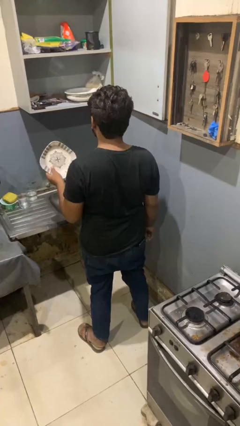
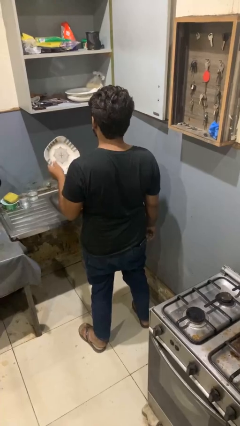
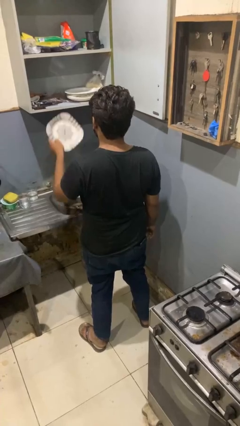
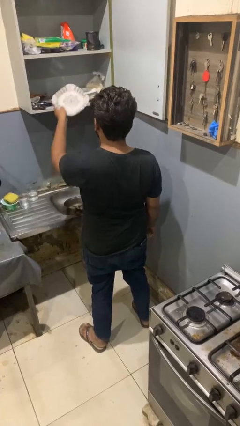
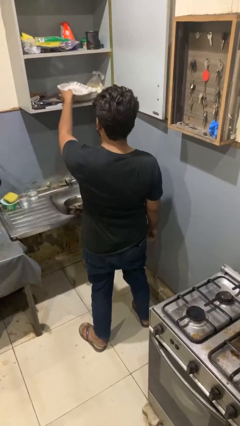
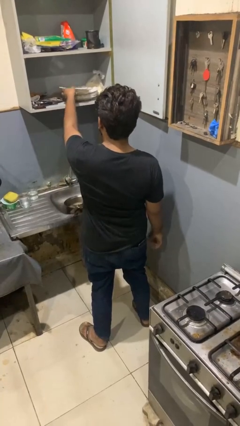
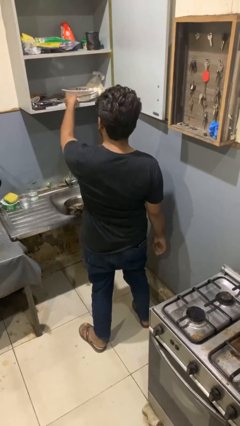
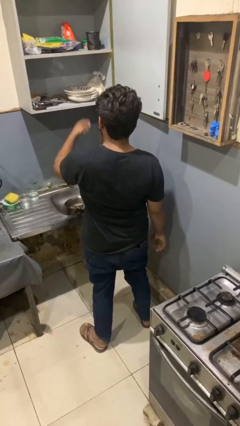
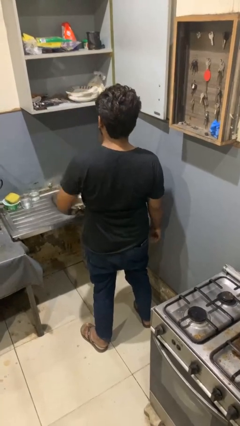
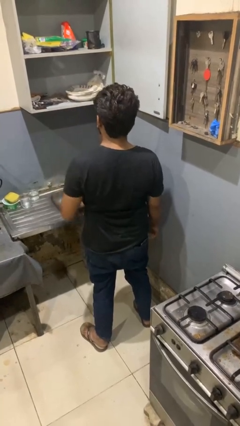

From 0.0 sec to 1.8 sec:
person puts object into kitchen drawer

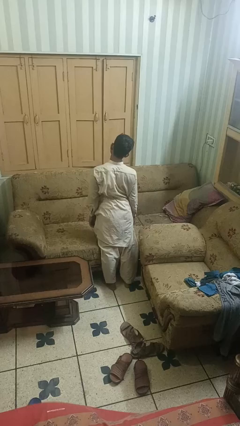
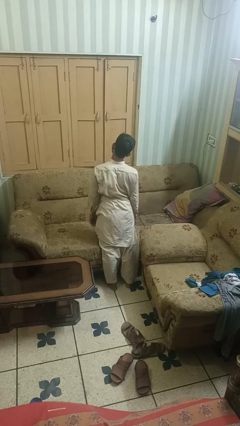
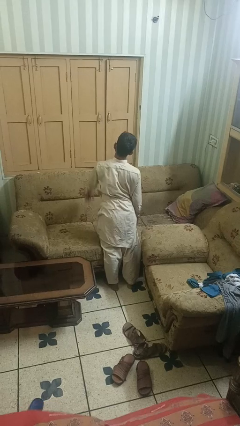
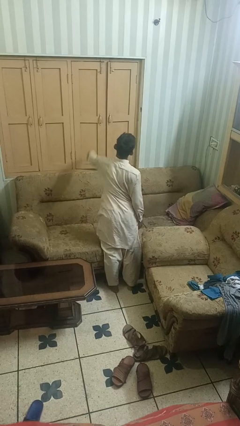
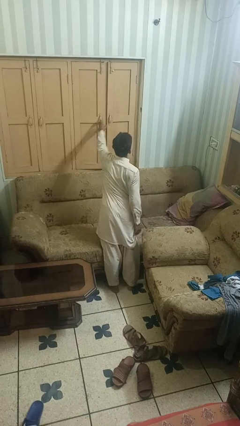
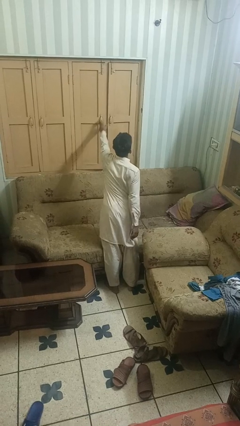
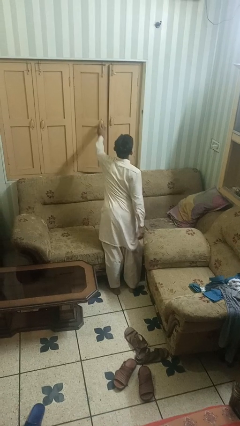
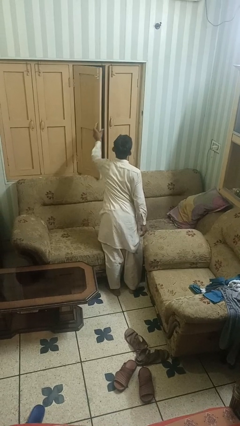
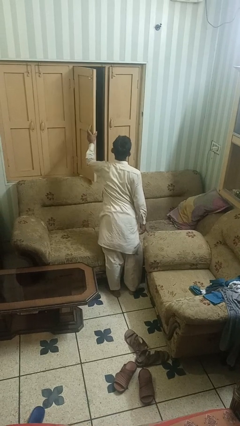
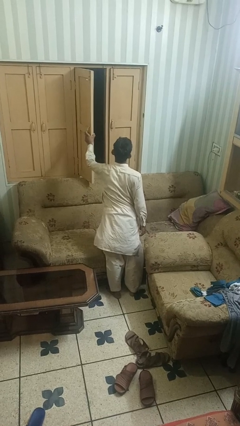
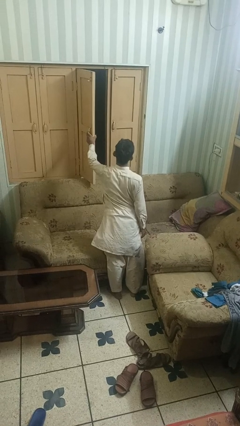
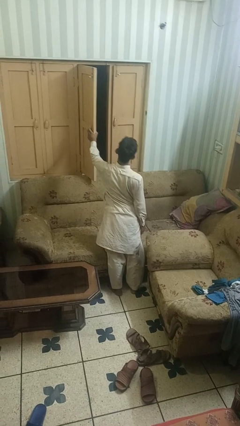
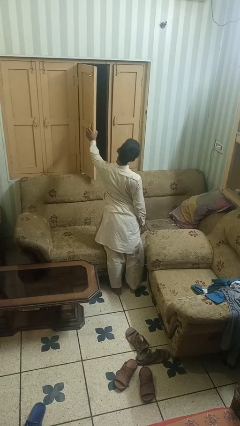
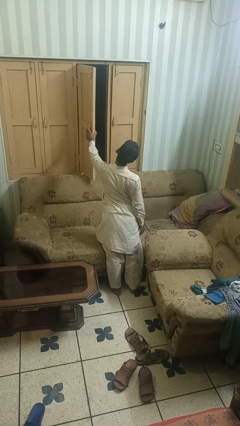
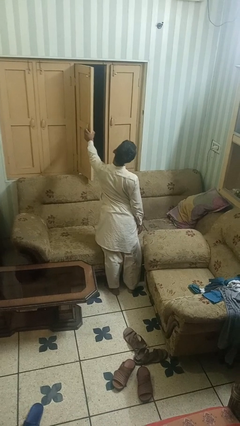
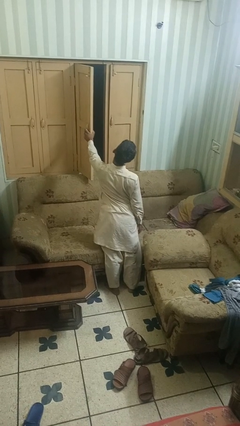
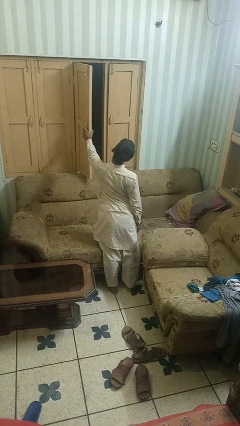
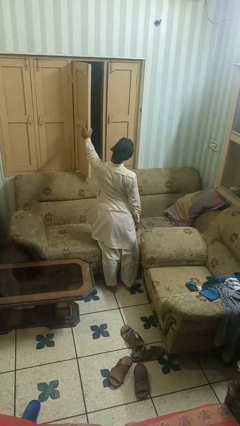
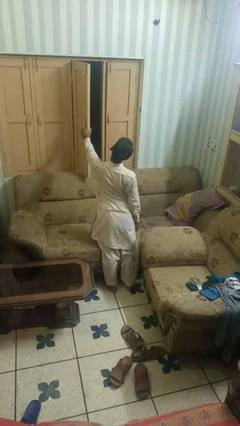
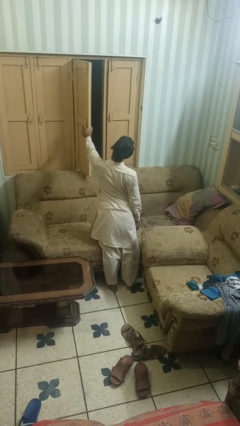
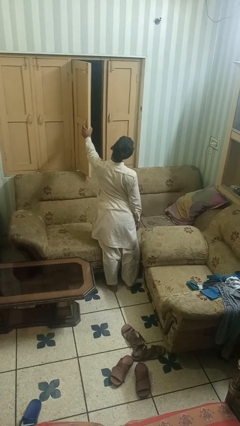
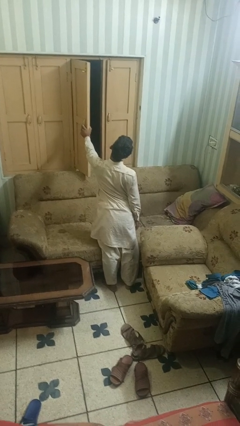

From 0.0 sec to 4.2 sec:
person opens home window

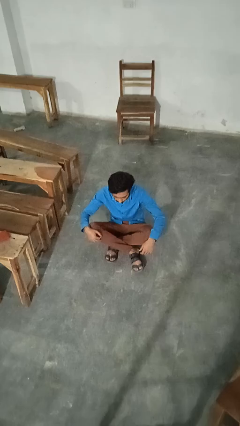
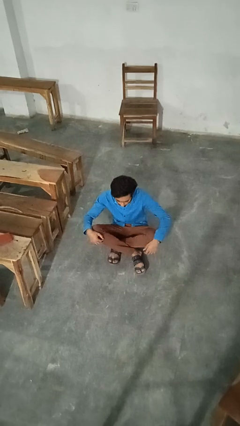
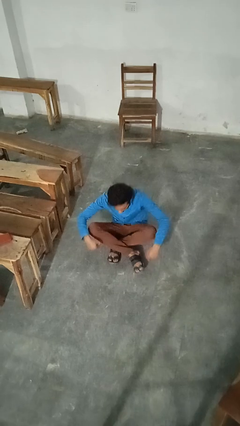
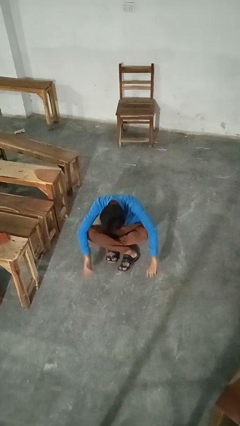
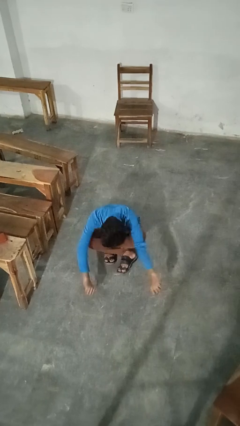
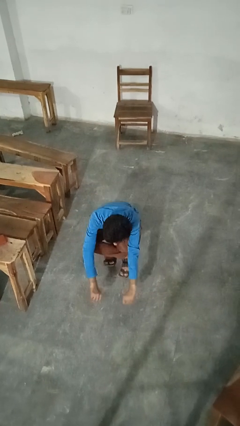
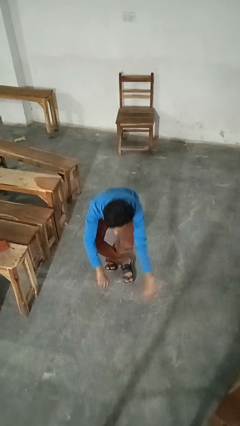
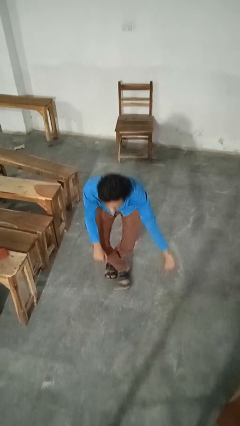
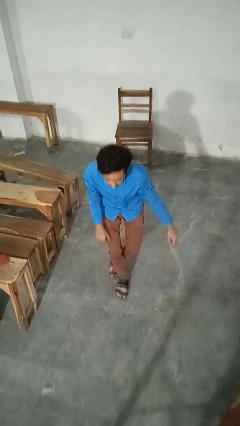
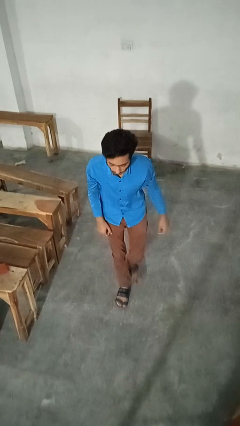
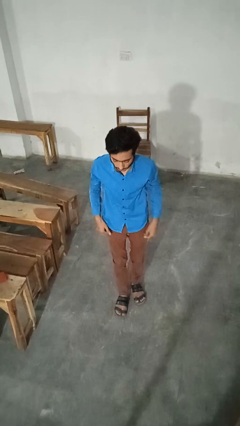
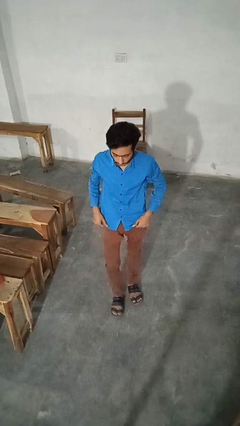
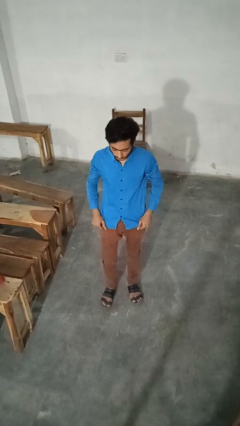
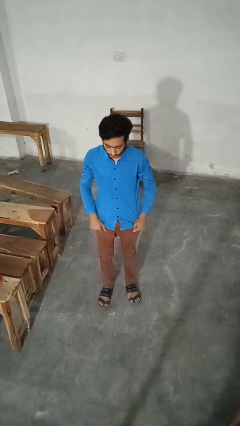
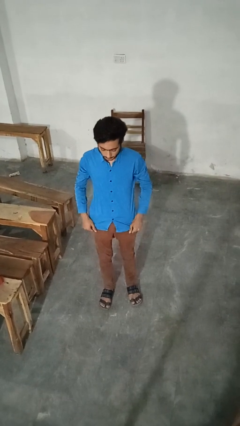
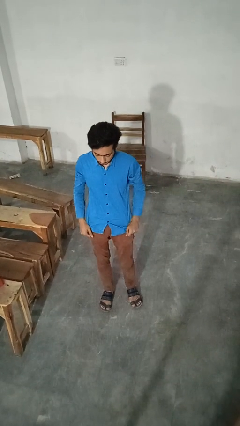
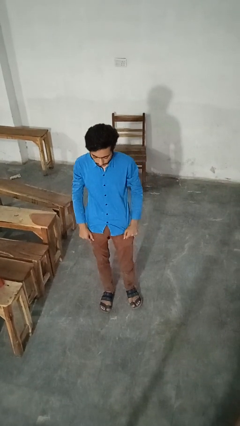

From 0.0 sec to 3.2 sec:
person stands up from floor

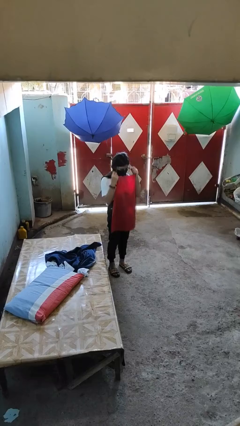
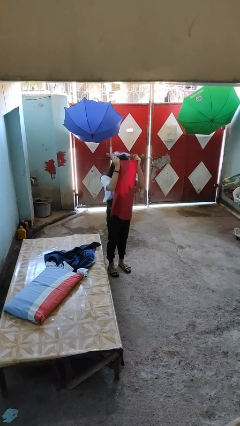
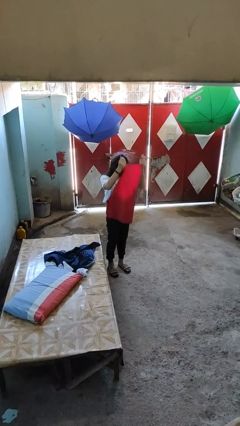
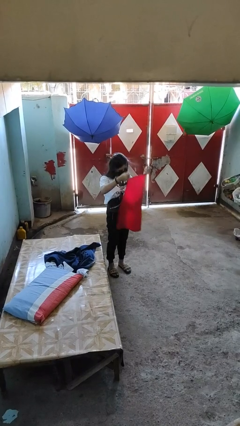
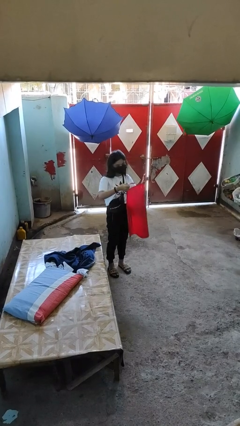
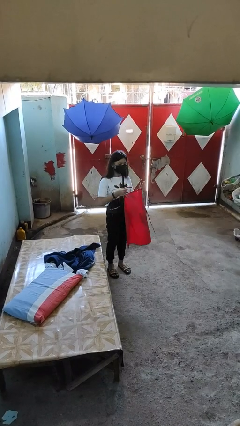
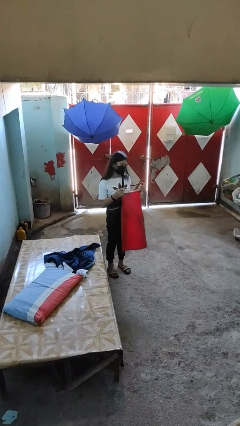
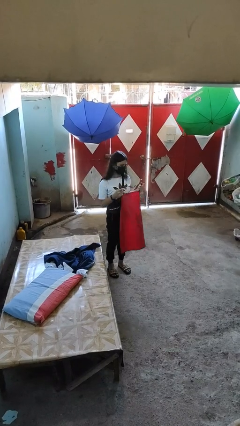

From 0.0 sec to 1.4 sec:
person takes off apron

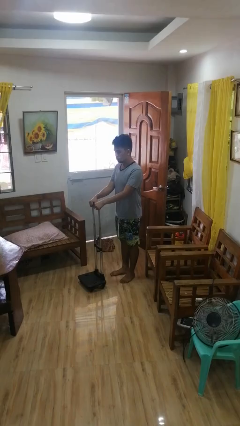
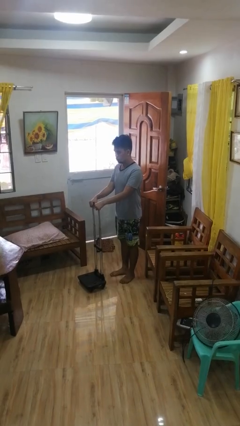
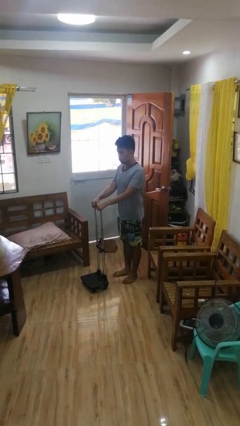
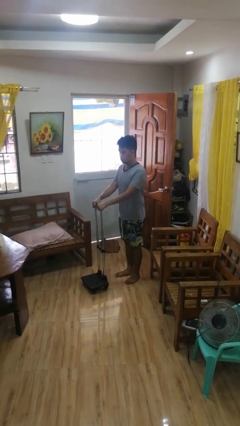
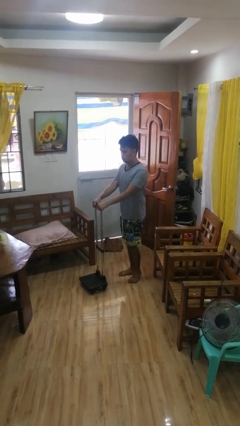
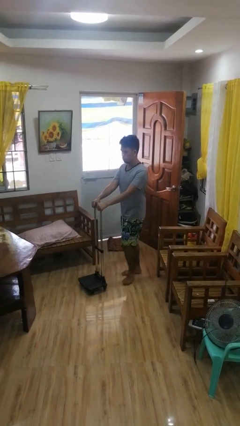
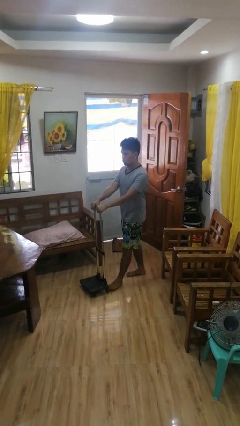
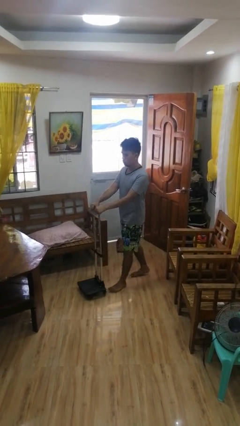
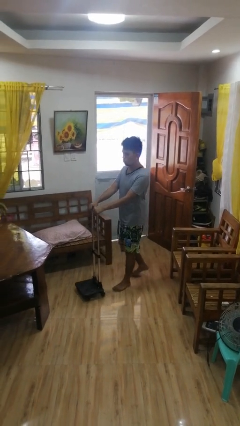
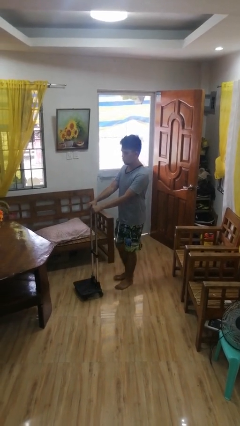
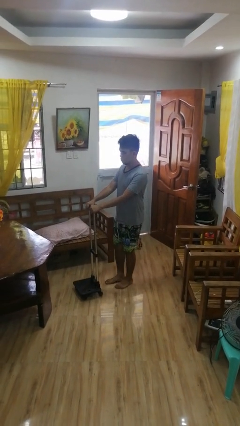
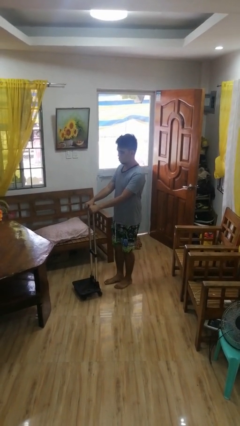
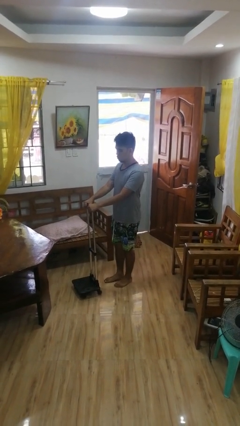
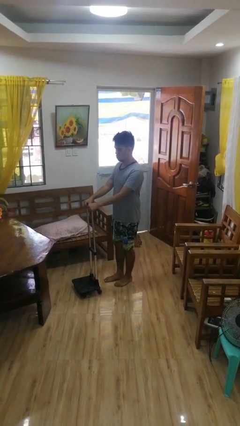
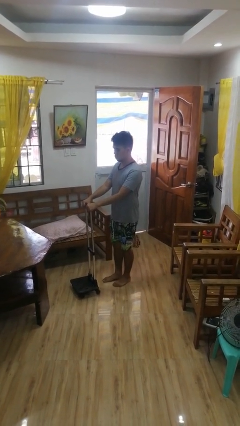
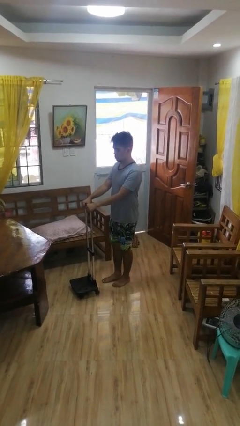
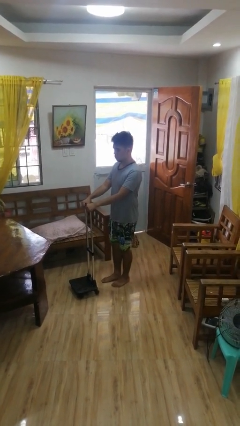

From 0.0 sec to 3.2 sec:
person pushes wheeled cart

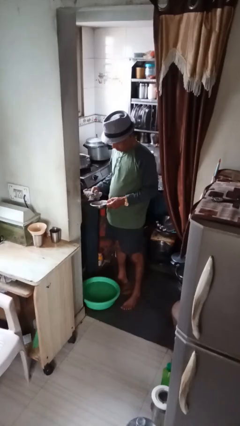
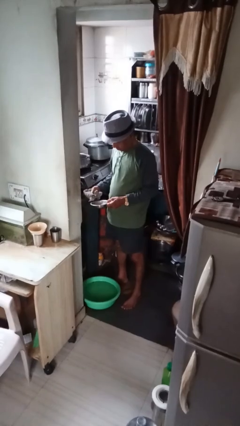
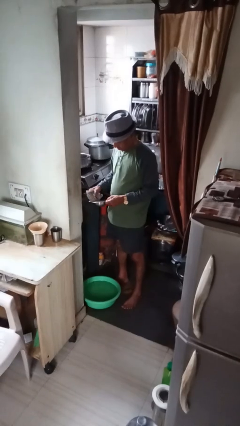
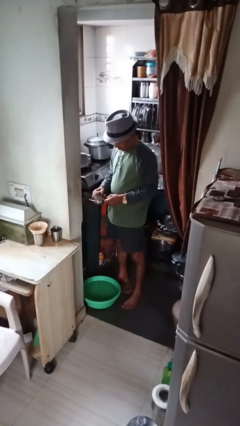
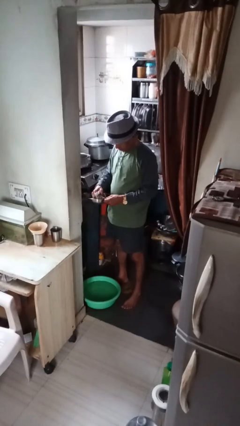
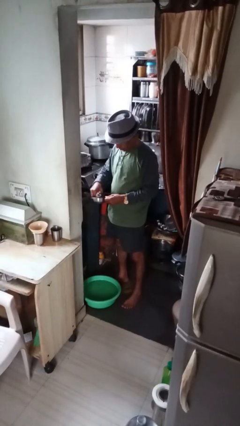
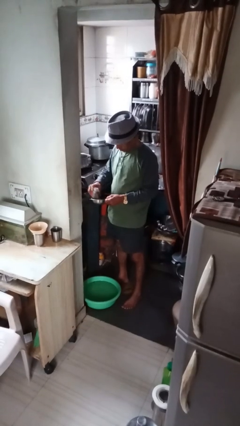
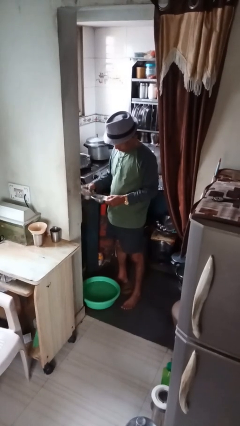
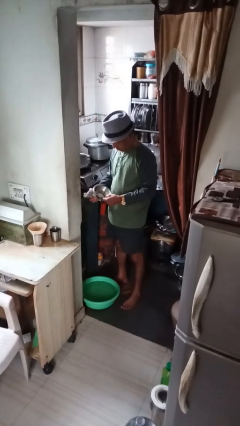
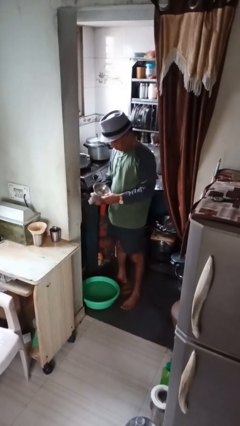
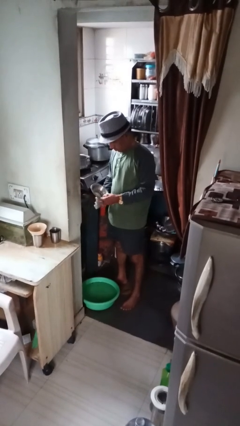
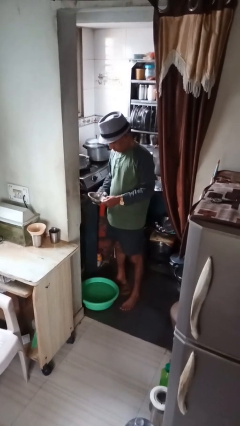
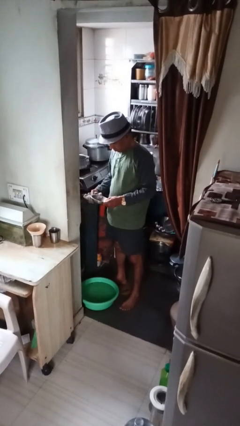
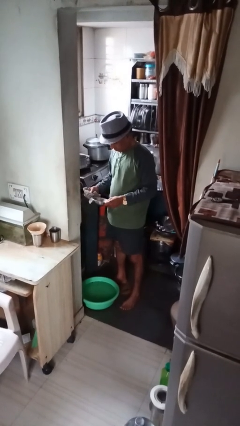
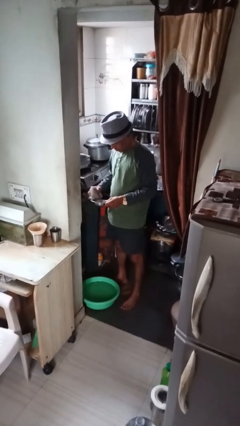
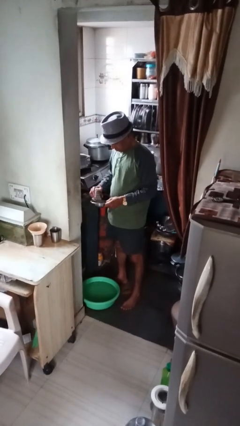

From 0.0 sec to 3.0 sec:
person dries dish

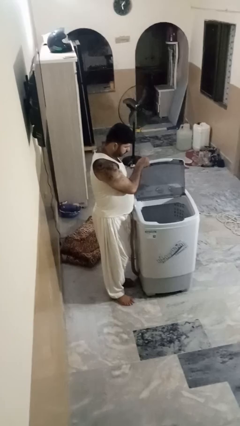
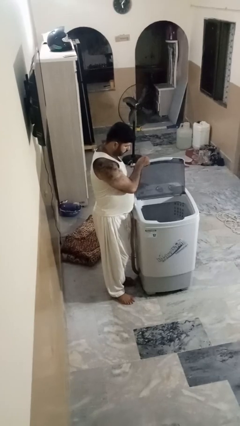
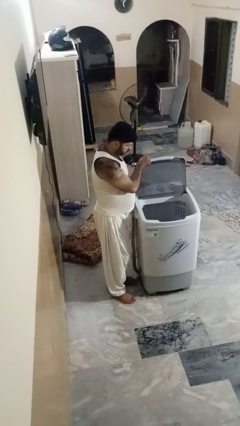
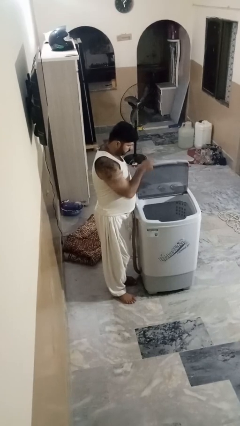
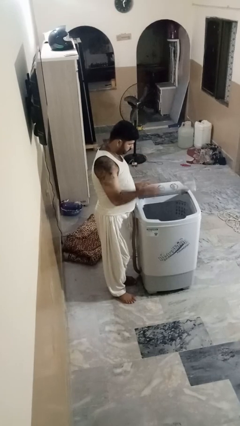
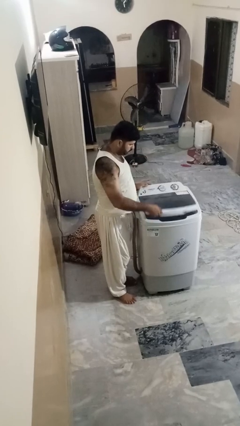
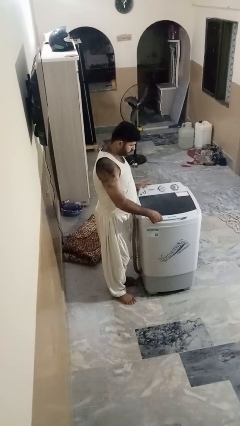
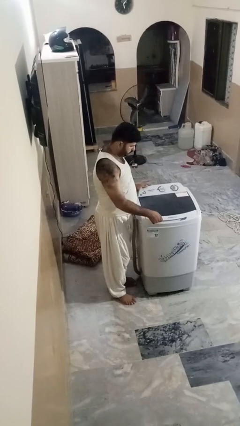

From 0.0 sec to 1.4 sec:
person closes clothes washer
